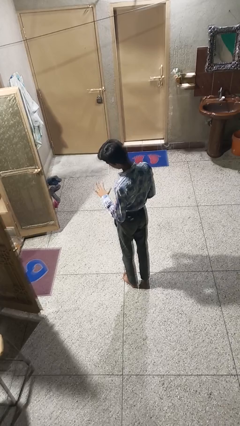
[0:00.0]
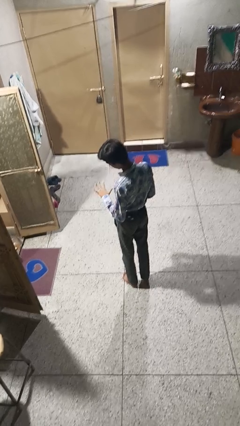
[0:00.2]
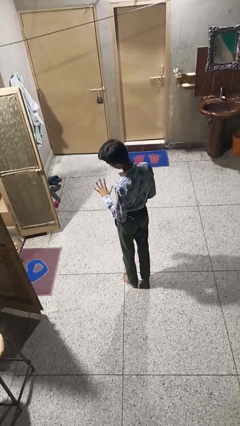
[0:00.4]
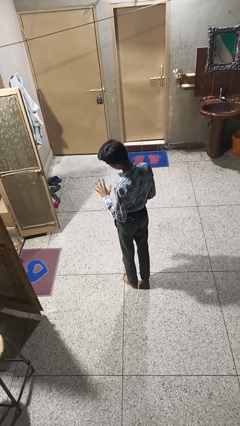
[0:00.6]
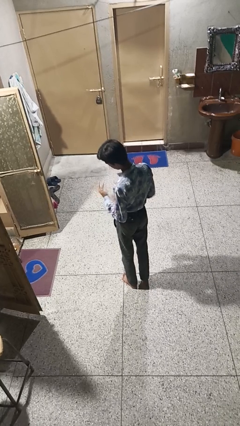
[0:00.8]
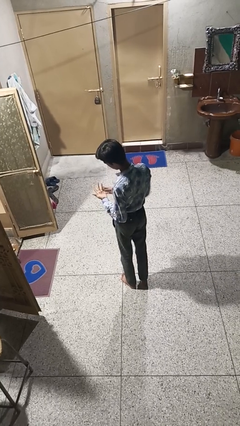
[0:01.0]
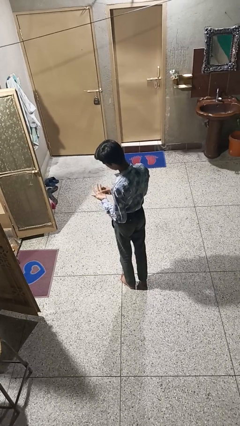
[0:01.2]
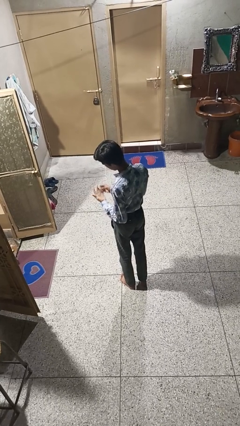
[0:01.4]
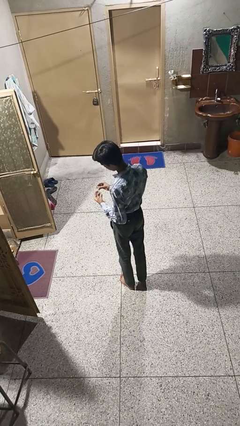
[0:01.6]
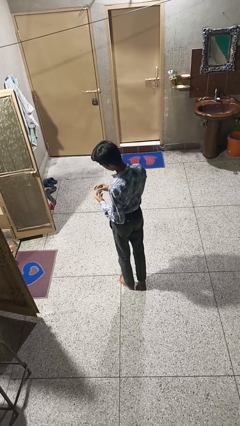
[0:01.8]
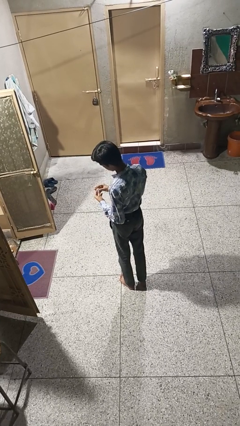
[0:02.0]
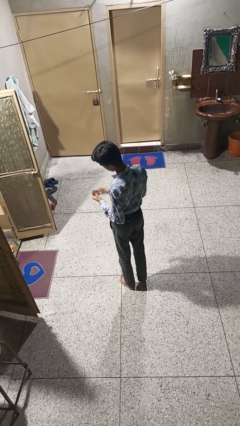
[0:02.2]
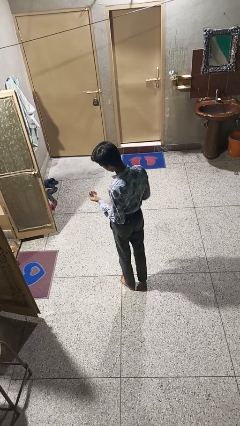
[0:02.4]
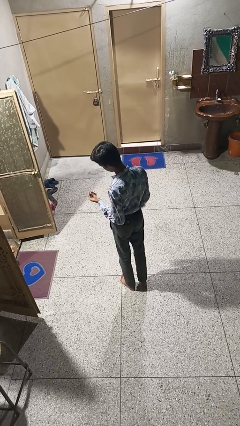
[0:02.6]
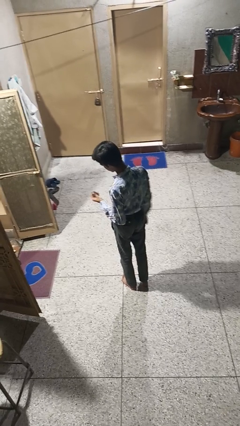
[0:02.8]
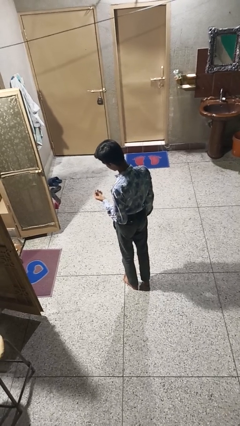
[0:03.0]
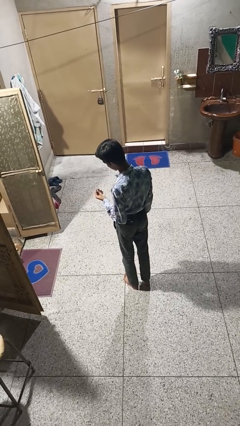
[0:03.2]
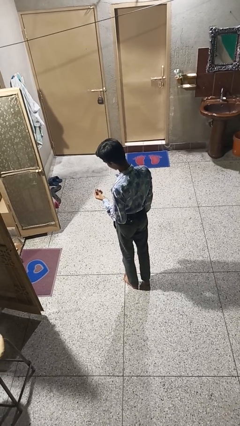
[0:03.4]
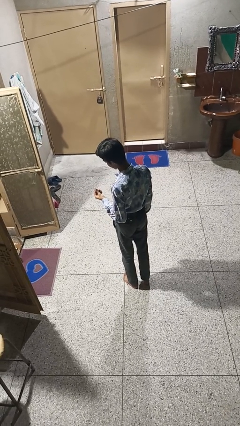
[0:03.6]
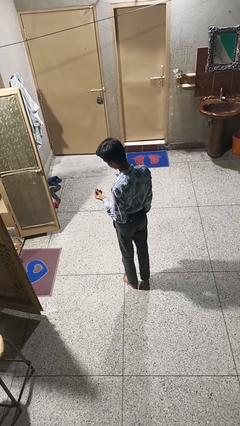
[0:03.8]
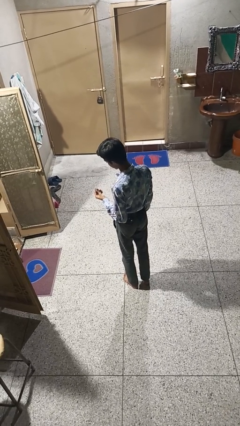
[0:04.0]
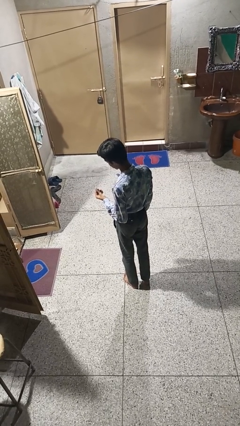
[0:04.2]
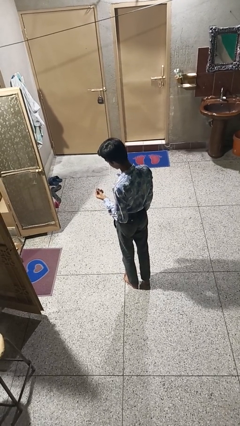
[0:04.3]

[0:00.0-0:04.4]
person takes off ring

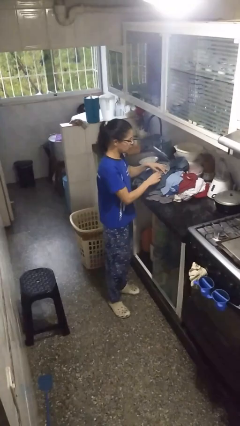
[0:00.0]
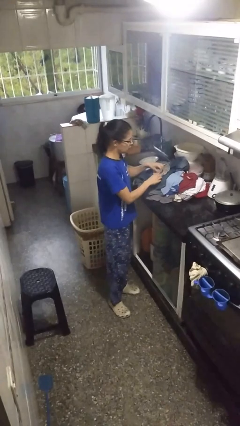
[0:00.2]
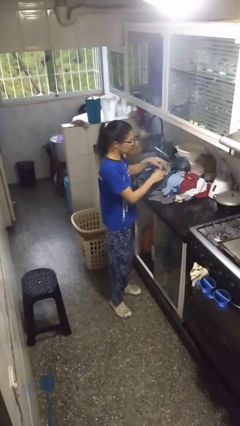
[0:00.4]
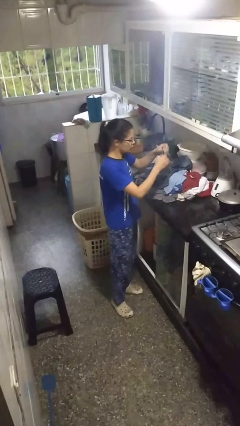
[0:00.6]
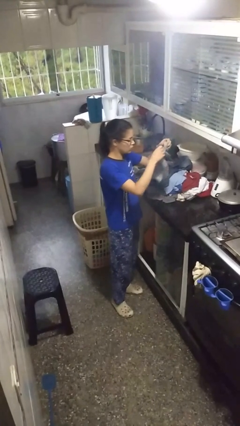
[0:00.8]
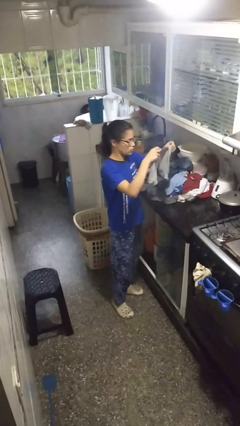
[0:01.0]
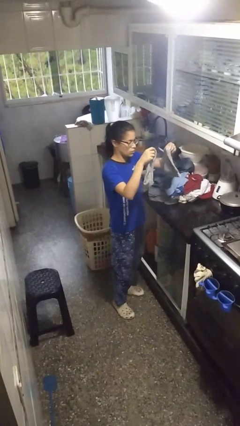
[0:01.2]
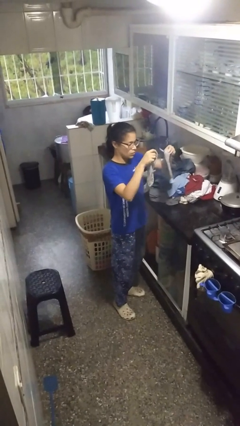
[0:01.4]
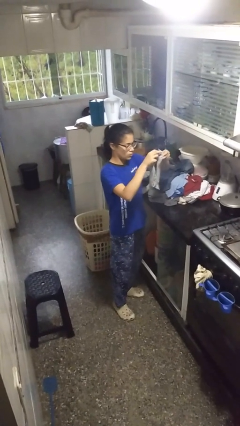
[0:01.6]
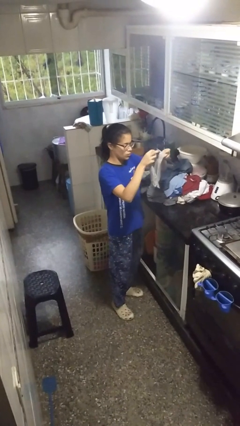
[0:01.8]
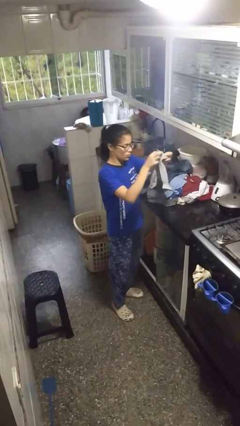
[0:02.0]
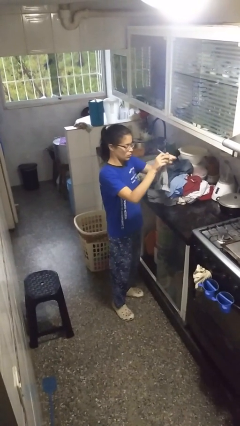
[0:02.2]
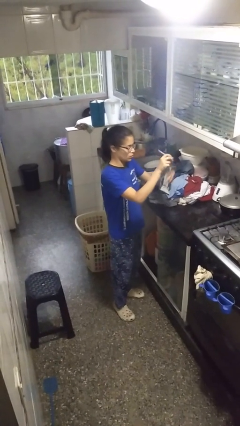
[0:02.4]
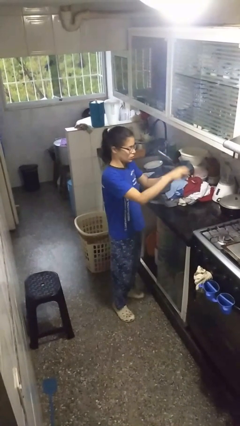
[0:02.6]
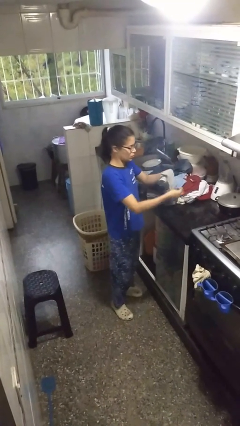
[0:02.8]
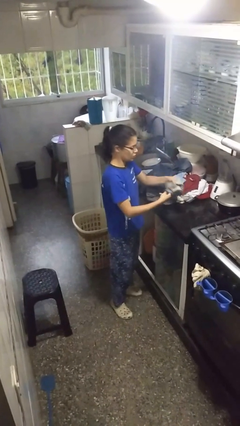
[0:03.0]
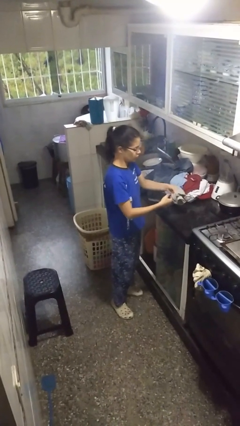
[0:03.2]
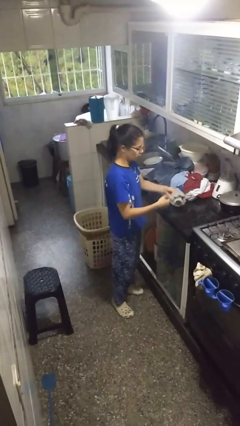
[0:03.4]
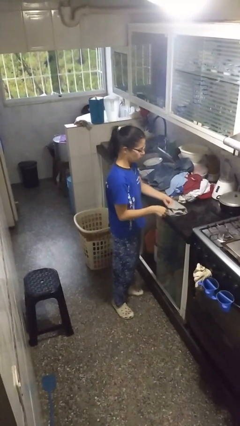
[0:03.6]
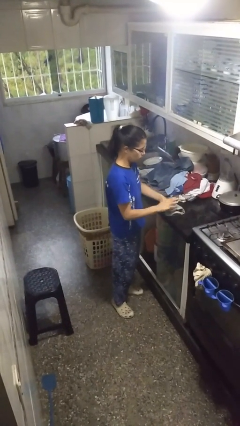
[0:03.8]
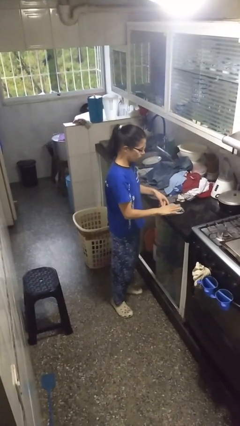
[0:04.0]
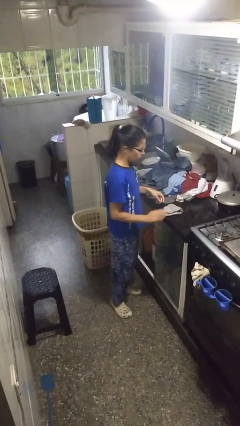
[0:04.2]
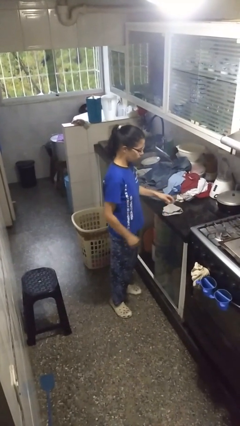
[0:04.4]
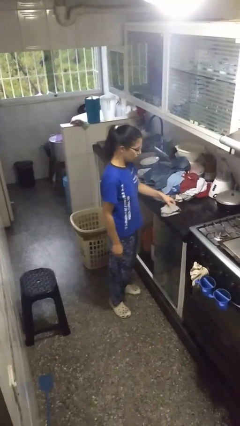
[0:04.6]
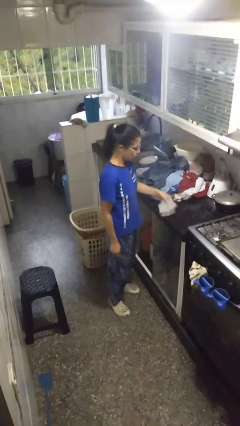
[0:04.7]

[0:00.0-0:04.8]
person folds socks

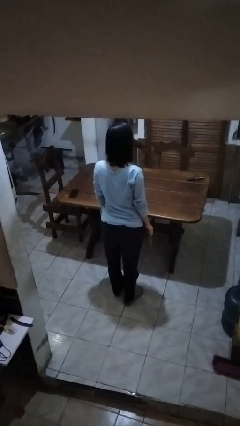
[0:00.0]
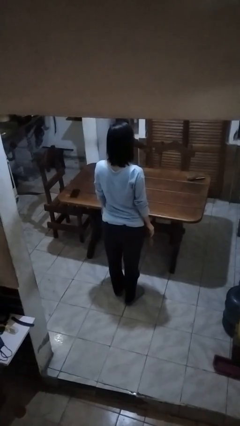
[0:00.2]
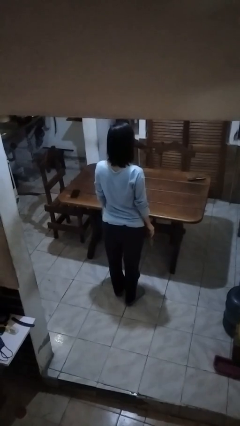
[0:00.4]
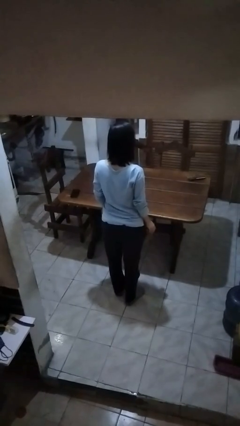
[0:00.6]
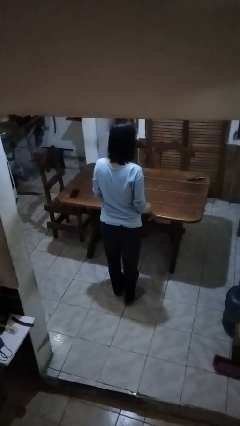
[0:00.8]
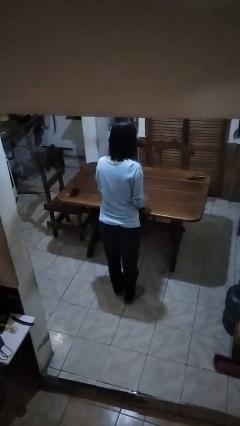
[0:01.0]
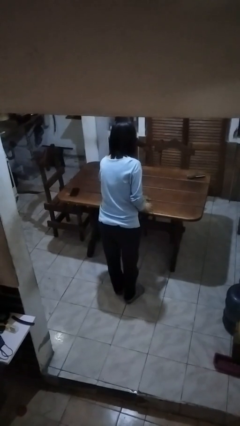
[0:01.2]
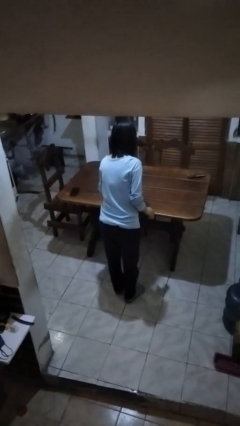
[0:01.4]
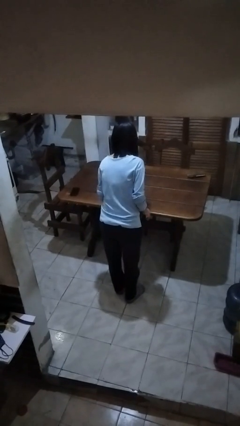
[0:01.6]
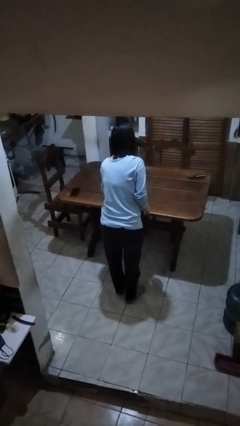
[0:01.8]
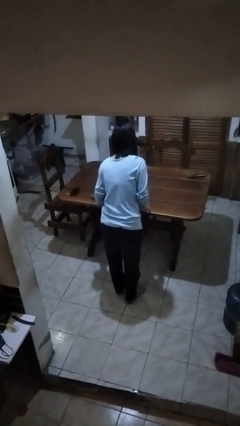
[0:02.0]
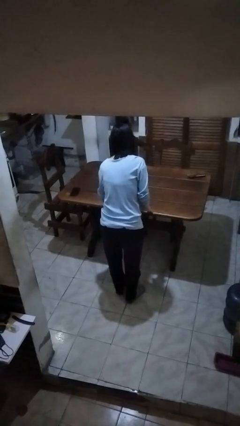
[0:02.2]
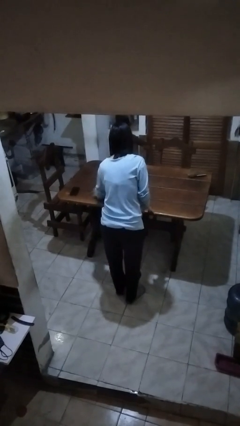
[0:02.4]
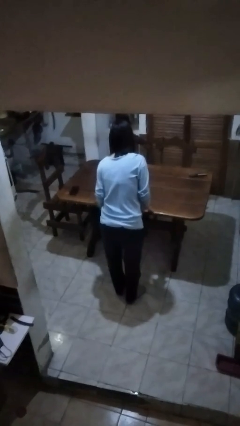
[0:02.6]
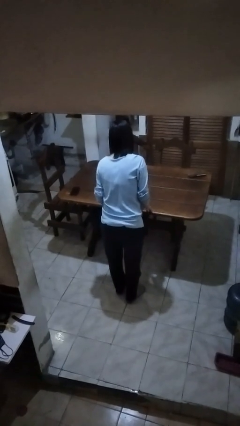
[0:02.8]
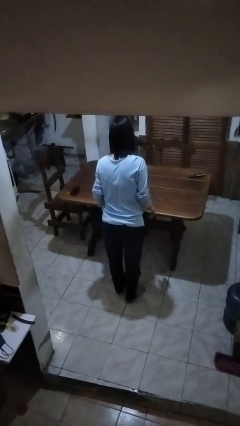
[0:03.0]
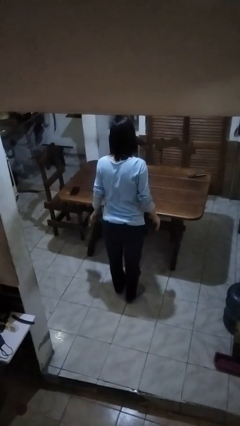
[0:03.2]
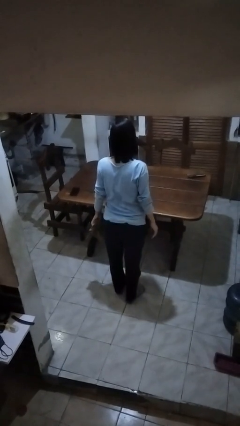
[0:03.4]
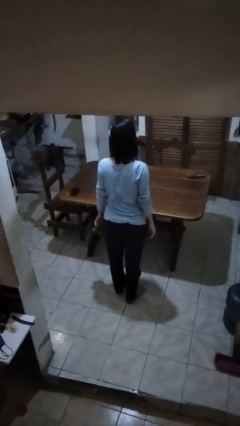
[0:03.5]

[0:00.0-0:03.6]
person cleans table with rag

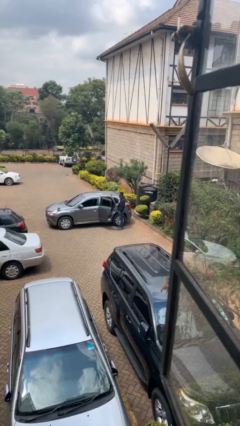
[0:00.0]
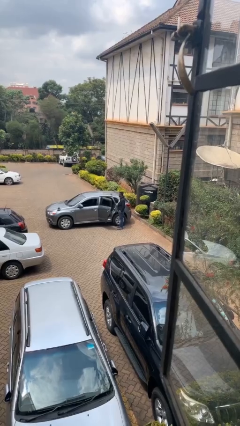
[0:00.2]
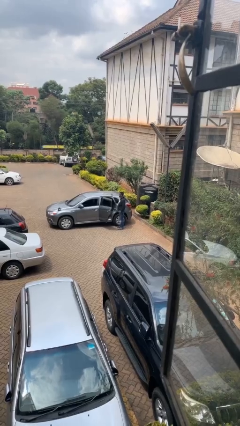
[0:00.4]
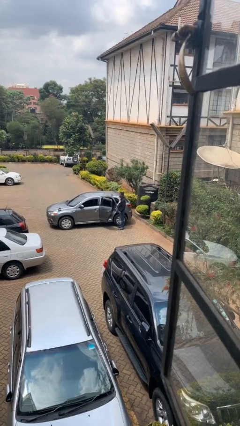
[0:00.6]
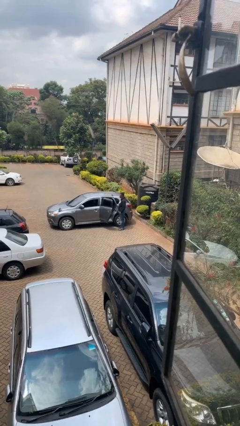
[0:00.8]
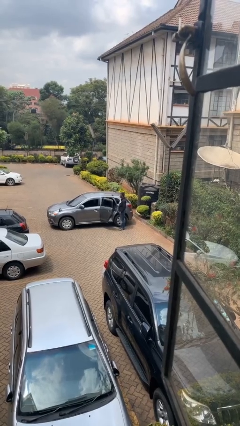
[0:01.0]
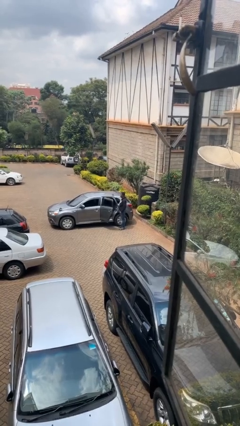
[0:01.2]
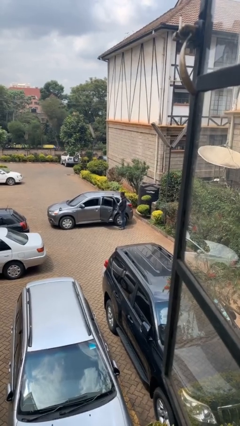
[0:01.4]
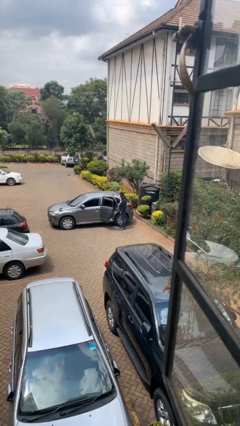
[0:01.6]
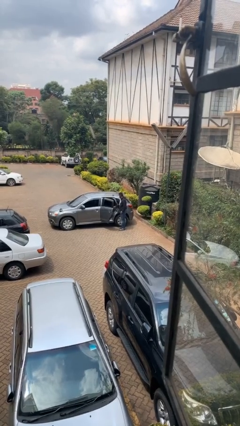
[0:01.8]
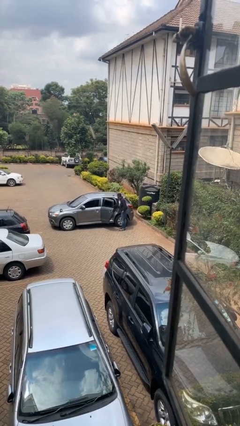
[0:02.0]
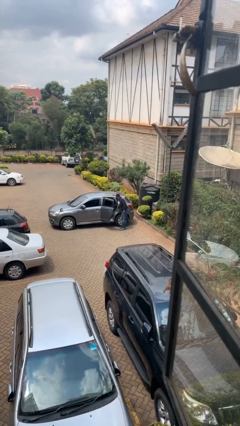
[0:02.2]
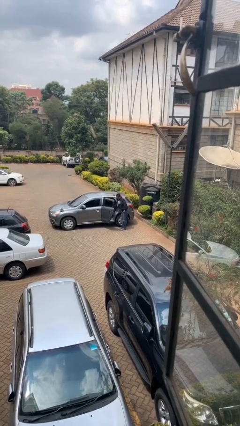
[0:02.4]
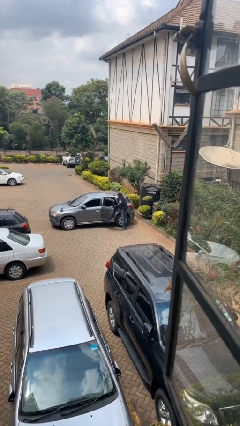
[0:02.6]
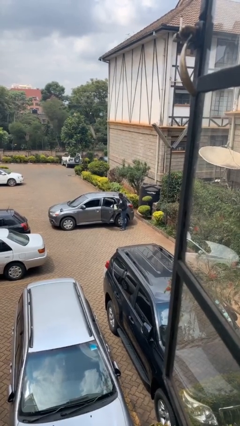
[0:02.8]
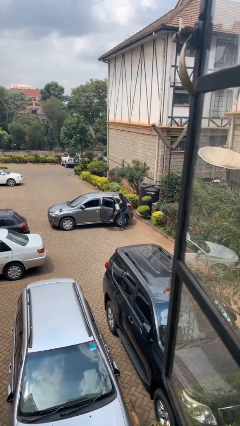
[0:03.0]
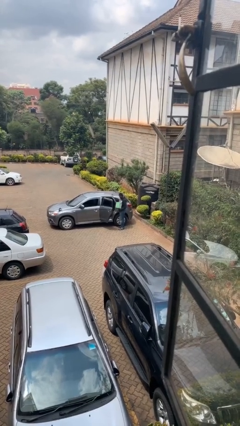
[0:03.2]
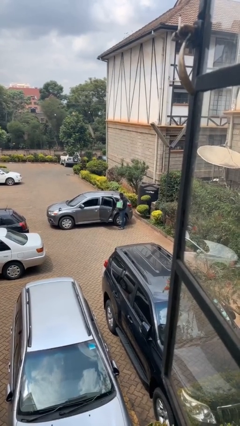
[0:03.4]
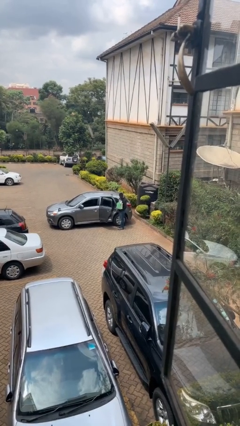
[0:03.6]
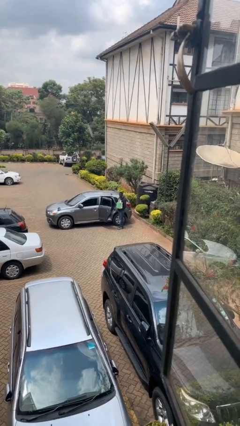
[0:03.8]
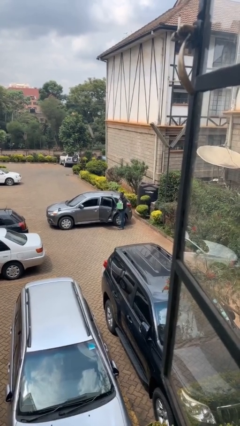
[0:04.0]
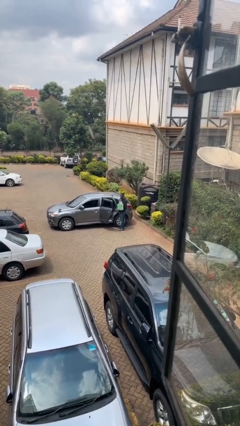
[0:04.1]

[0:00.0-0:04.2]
person unloads car

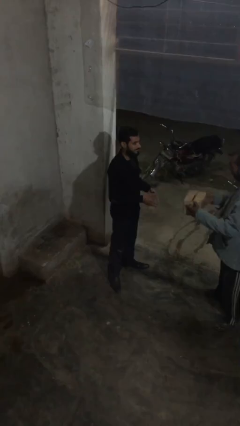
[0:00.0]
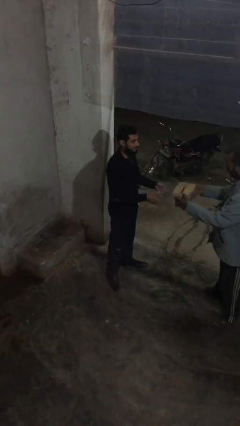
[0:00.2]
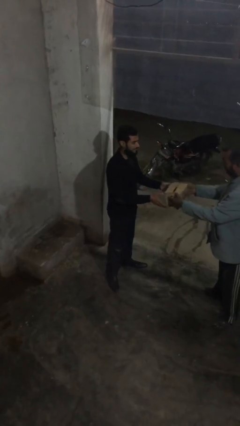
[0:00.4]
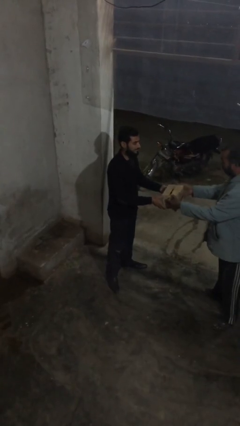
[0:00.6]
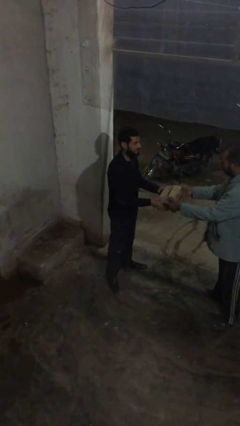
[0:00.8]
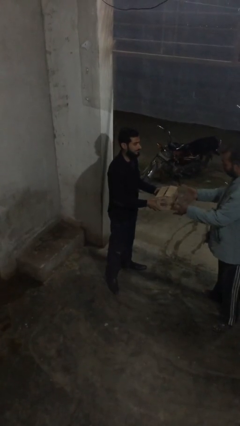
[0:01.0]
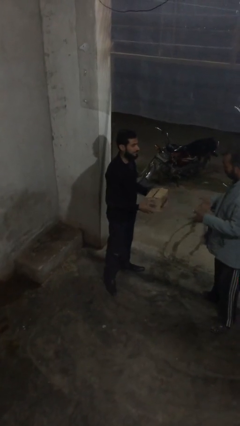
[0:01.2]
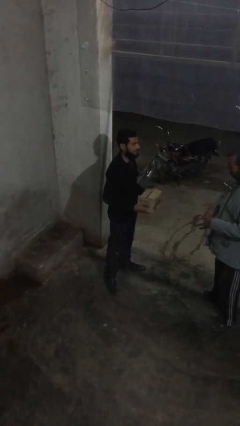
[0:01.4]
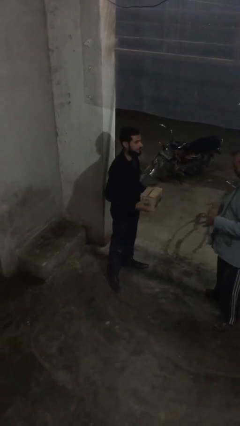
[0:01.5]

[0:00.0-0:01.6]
person transfers object to person
